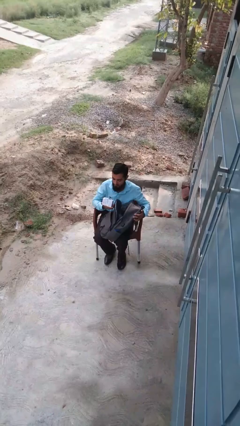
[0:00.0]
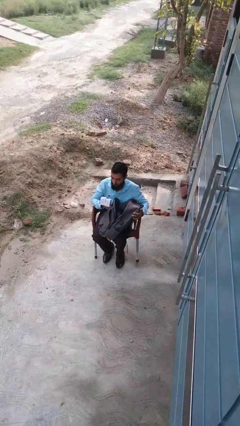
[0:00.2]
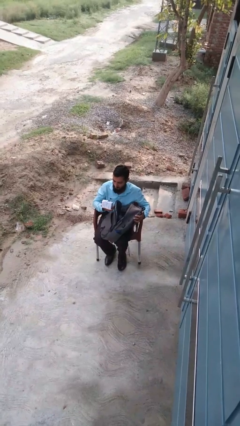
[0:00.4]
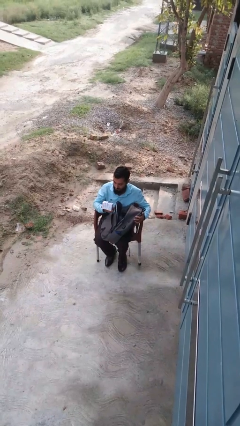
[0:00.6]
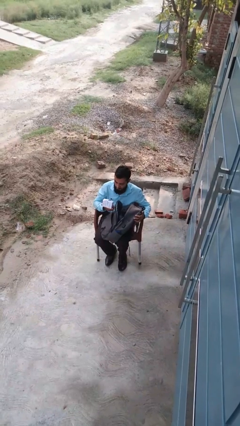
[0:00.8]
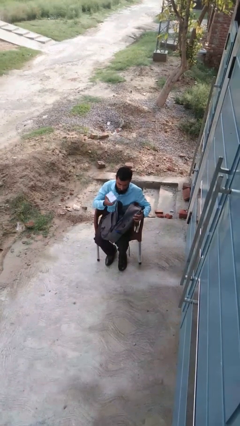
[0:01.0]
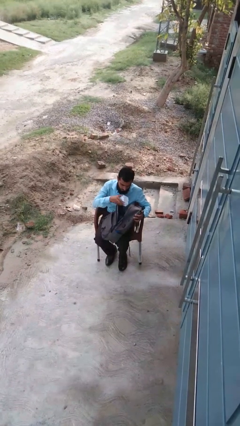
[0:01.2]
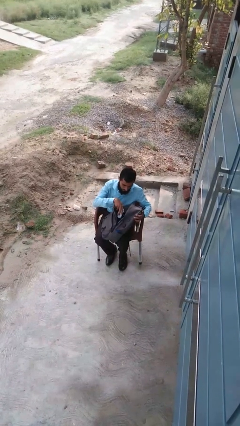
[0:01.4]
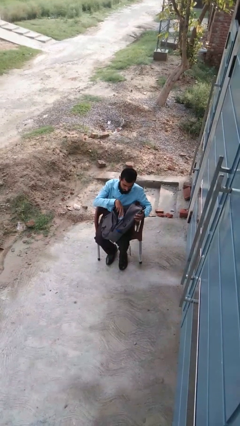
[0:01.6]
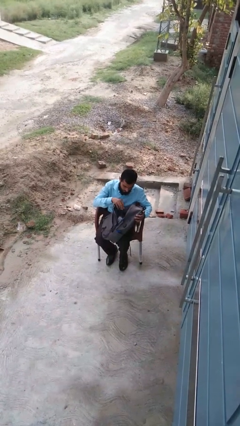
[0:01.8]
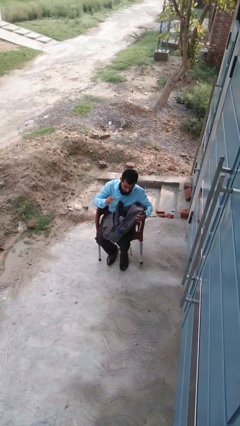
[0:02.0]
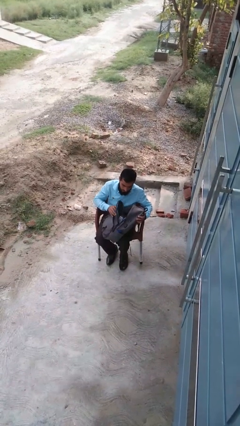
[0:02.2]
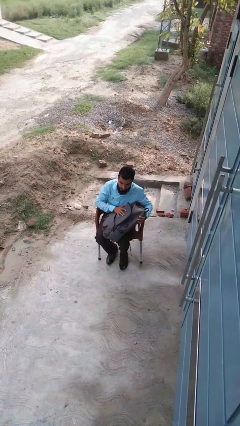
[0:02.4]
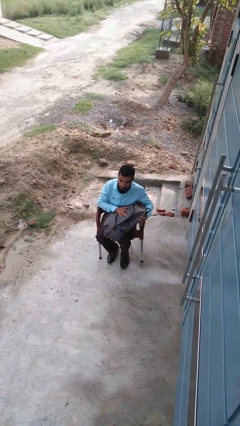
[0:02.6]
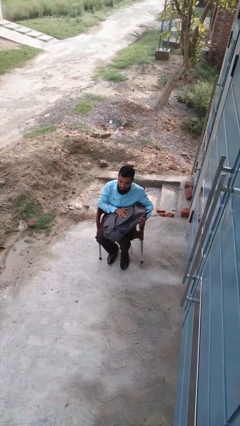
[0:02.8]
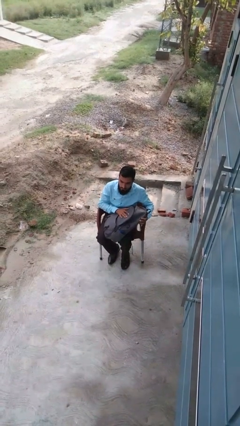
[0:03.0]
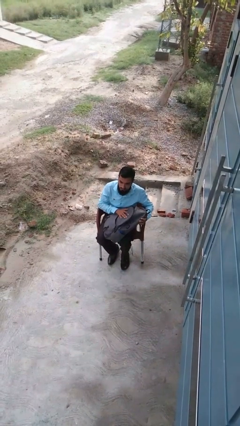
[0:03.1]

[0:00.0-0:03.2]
person puts object into backpack

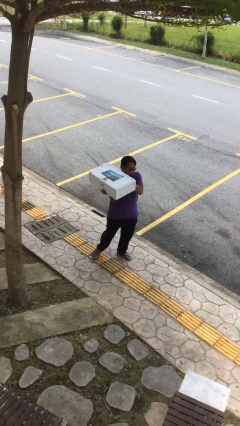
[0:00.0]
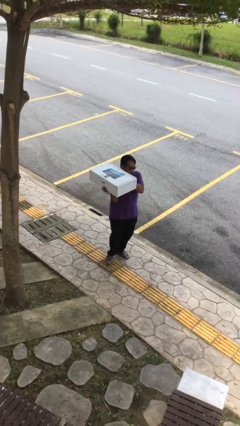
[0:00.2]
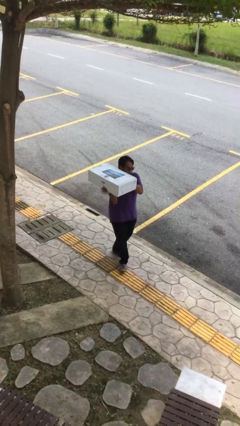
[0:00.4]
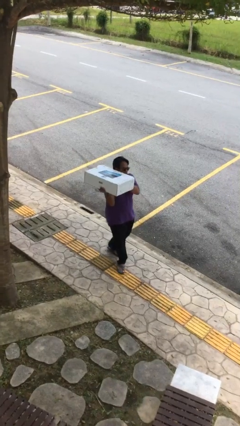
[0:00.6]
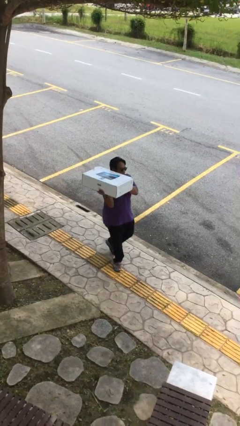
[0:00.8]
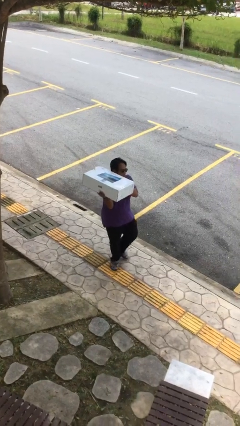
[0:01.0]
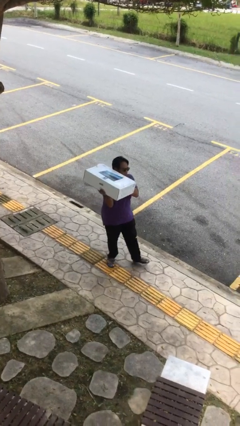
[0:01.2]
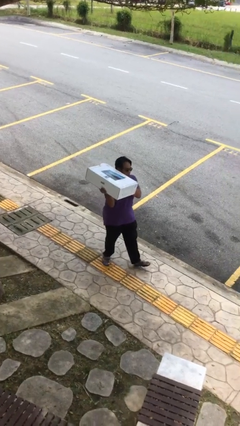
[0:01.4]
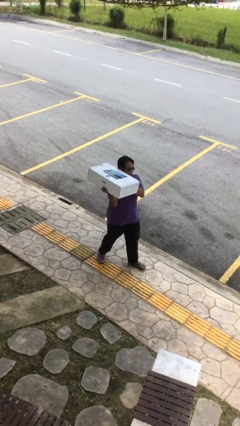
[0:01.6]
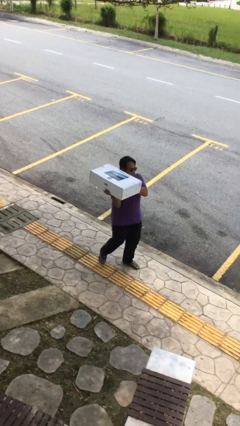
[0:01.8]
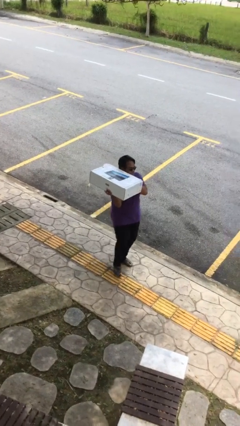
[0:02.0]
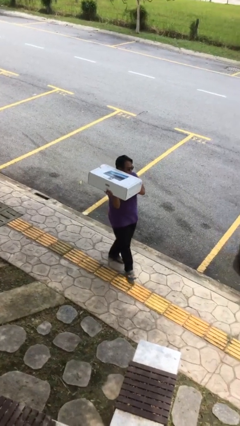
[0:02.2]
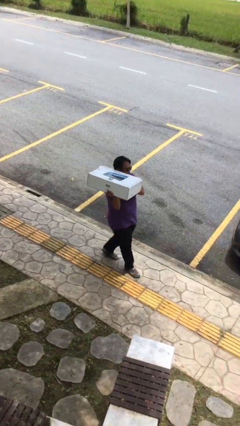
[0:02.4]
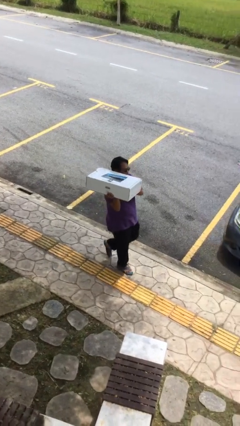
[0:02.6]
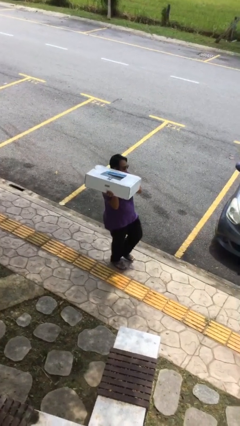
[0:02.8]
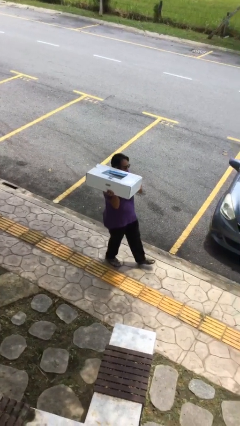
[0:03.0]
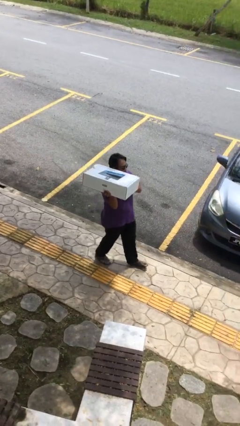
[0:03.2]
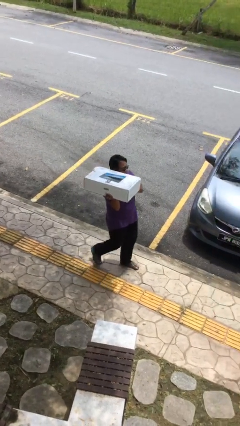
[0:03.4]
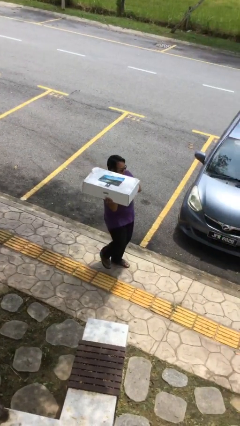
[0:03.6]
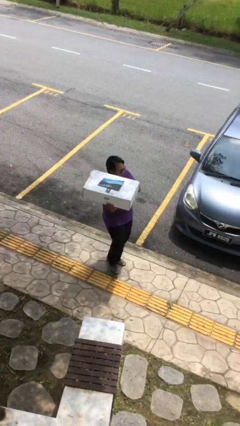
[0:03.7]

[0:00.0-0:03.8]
person carries heavy object

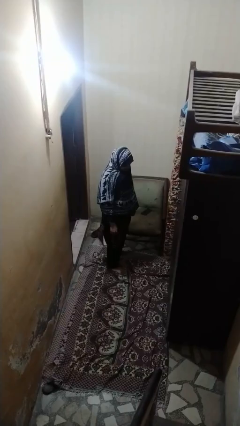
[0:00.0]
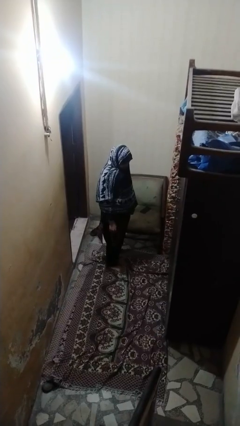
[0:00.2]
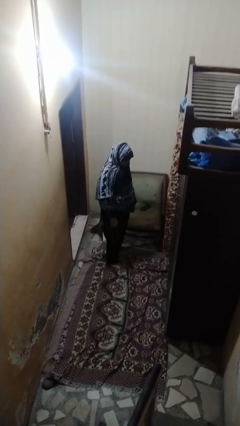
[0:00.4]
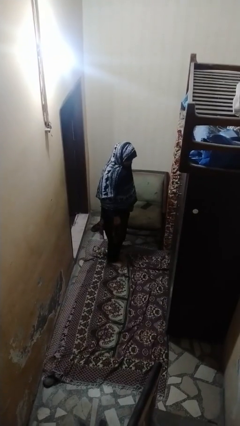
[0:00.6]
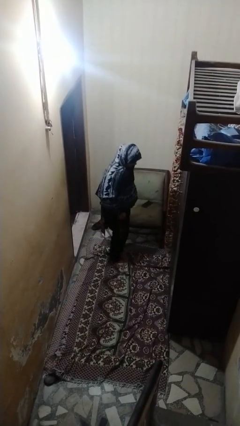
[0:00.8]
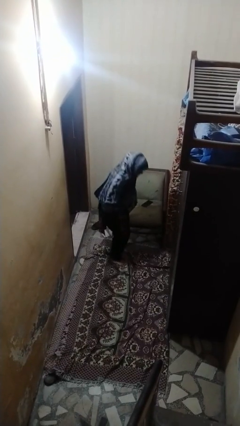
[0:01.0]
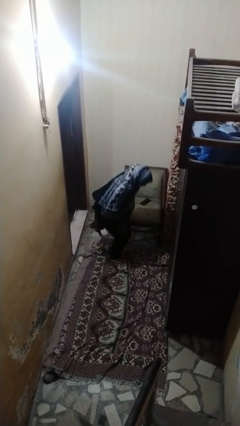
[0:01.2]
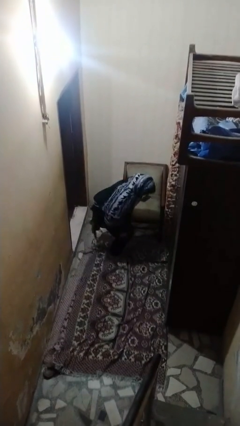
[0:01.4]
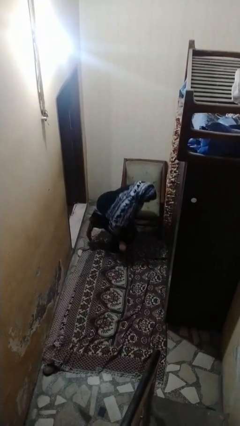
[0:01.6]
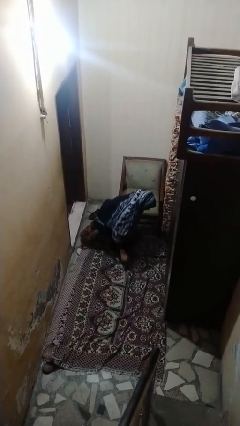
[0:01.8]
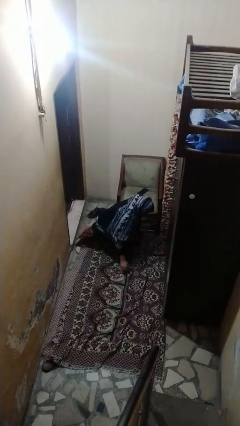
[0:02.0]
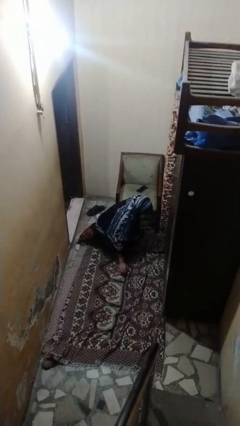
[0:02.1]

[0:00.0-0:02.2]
person falls while standing

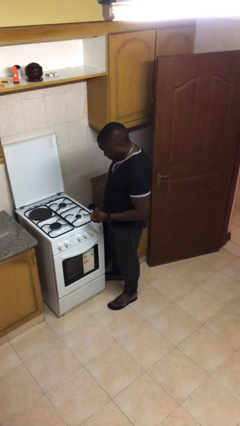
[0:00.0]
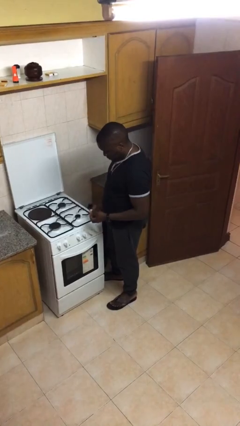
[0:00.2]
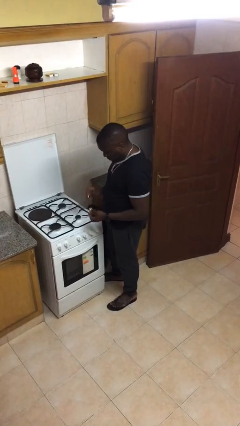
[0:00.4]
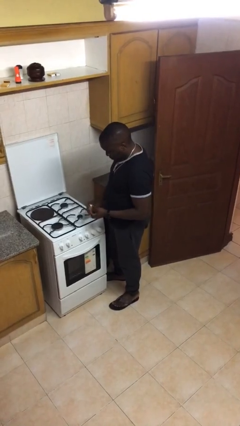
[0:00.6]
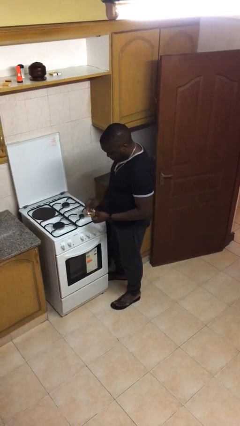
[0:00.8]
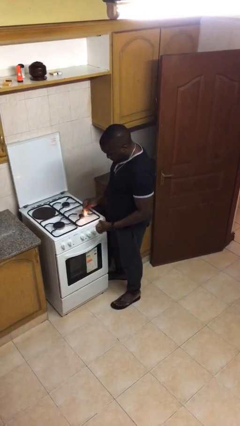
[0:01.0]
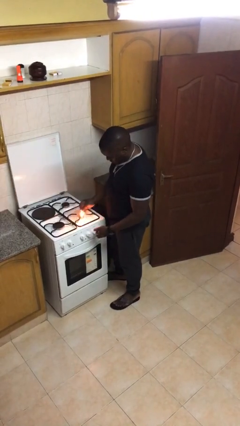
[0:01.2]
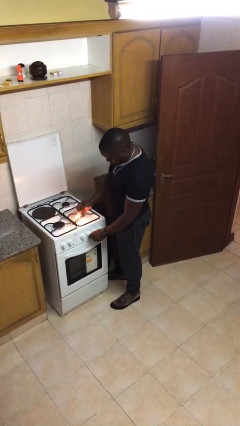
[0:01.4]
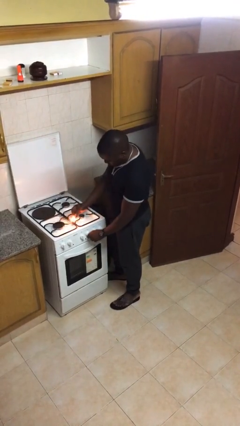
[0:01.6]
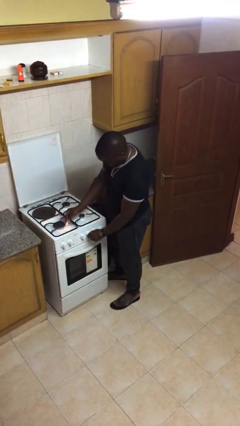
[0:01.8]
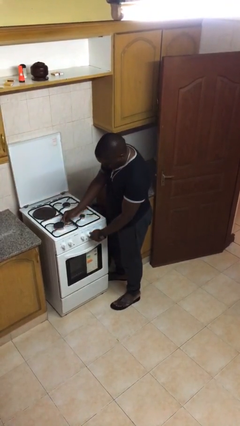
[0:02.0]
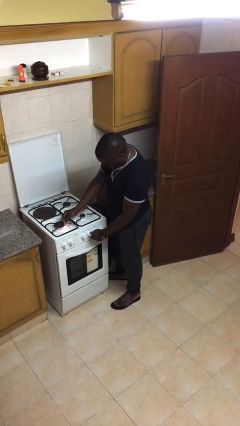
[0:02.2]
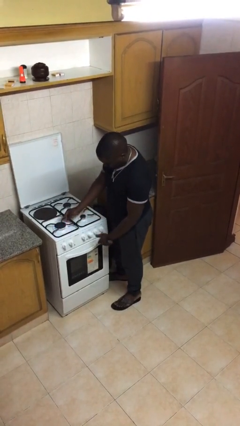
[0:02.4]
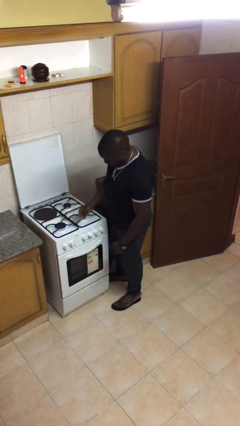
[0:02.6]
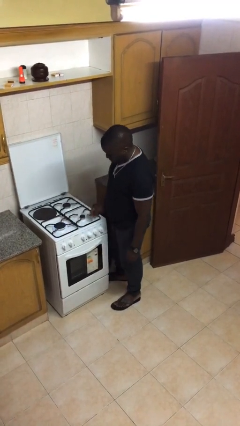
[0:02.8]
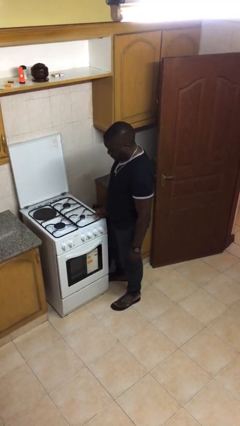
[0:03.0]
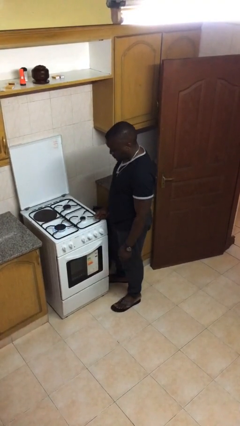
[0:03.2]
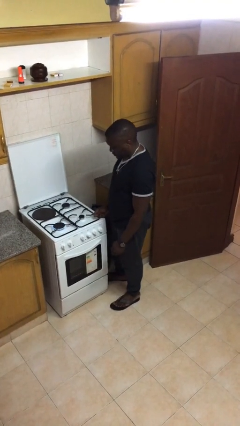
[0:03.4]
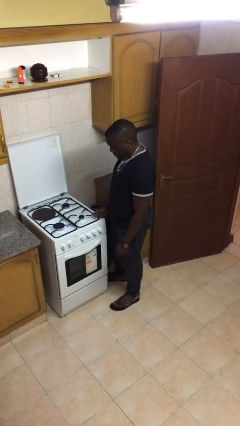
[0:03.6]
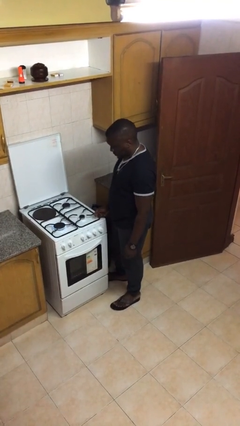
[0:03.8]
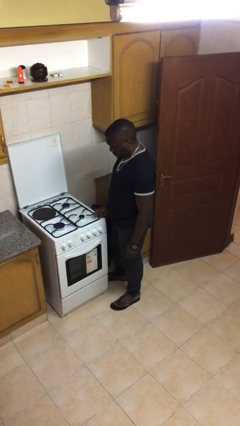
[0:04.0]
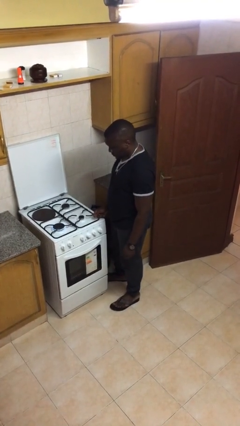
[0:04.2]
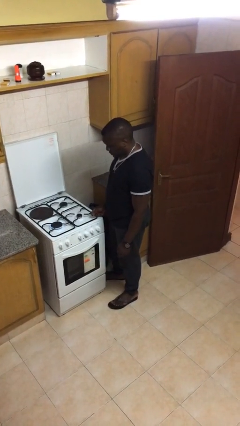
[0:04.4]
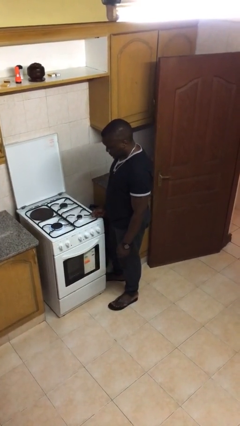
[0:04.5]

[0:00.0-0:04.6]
person turns on stovetop

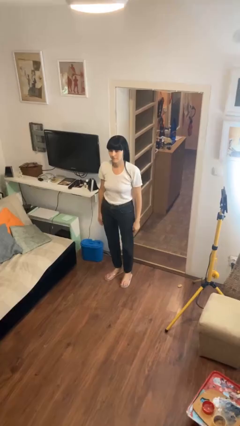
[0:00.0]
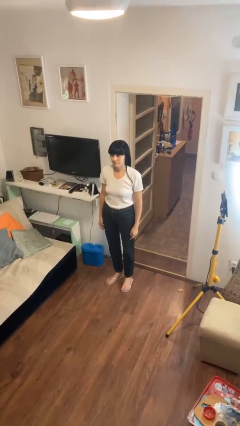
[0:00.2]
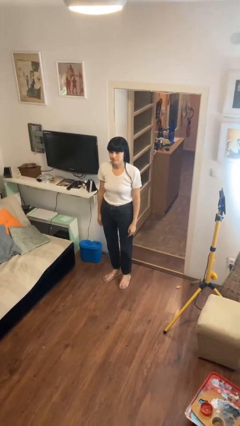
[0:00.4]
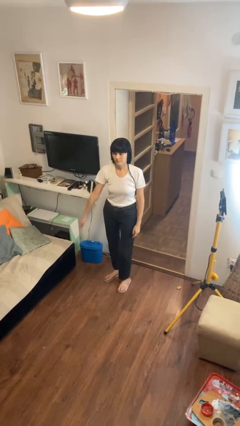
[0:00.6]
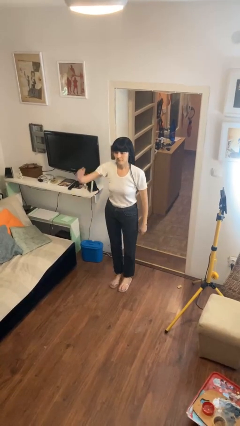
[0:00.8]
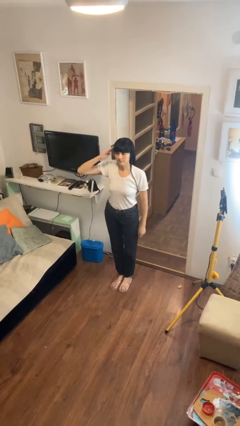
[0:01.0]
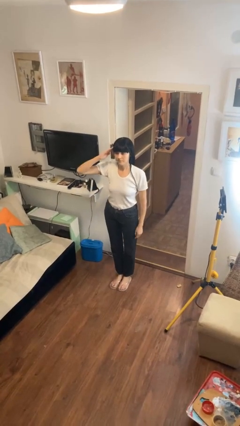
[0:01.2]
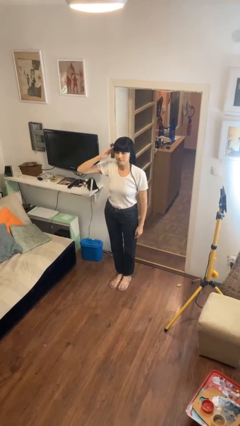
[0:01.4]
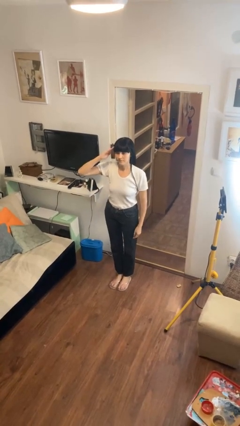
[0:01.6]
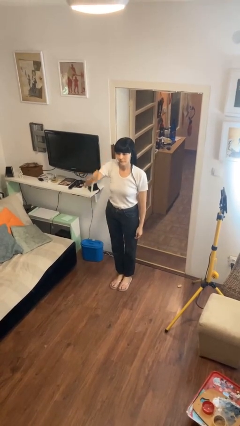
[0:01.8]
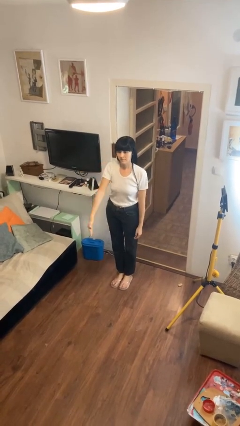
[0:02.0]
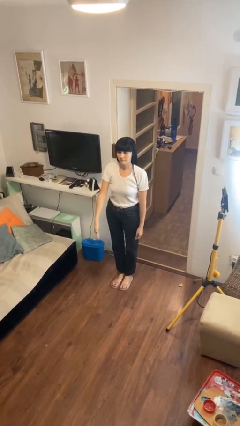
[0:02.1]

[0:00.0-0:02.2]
person salutes

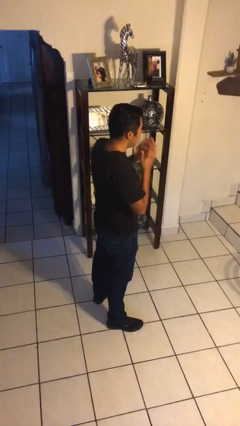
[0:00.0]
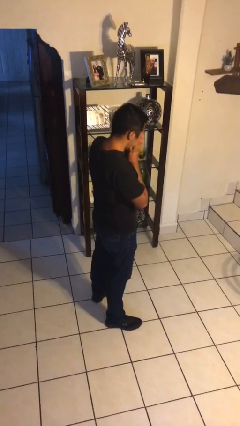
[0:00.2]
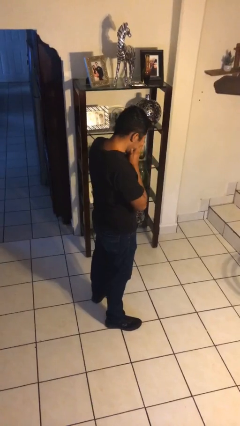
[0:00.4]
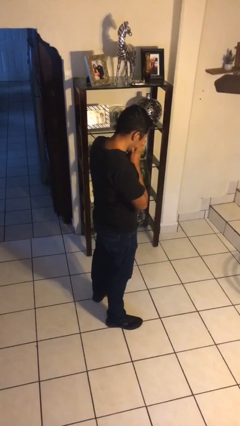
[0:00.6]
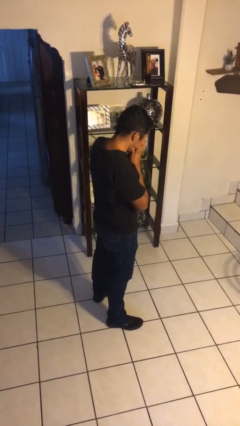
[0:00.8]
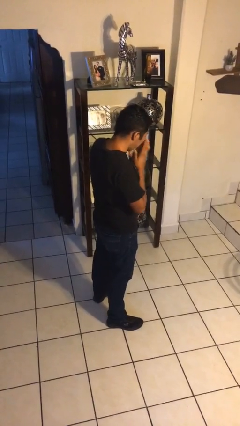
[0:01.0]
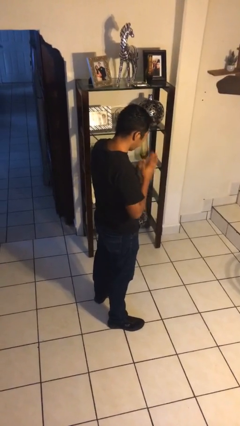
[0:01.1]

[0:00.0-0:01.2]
person sneezes into hand
